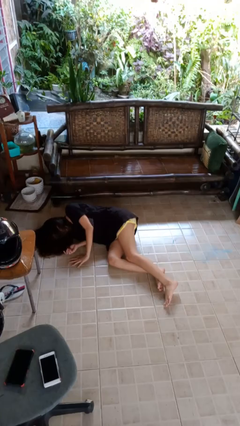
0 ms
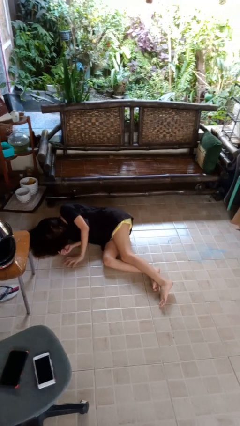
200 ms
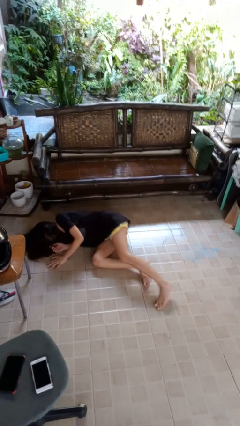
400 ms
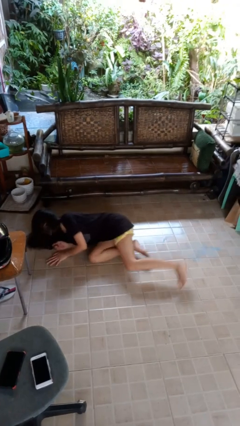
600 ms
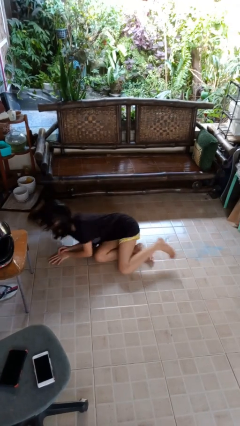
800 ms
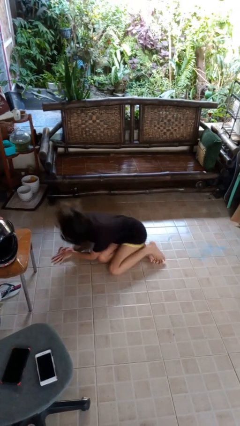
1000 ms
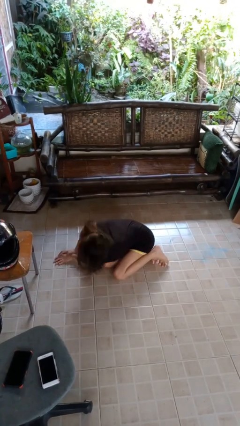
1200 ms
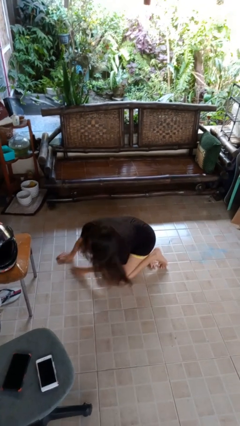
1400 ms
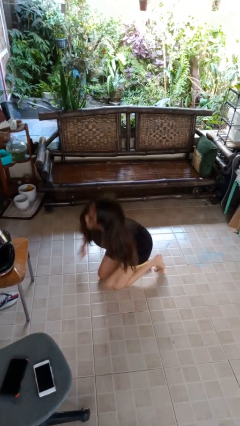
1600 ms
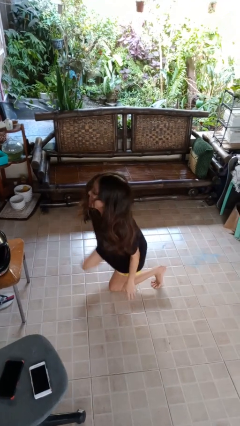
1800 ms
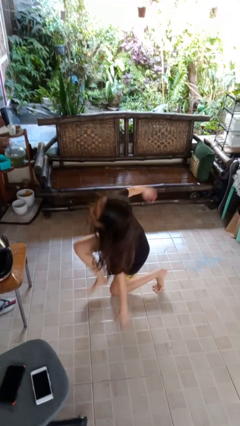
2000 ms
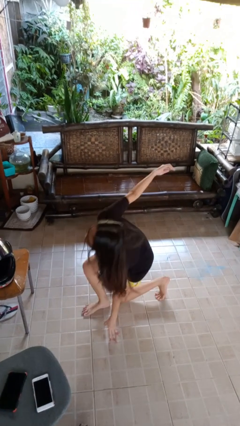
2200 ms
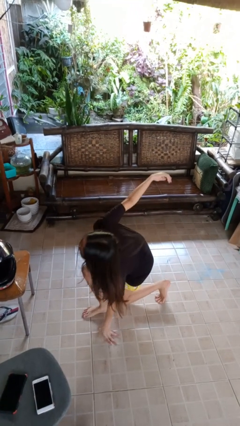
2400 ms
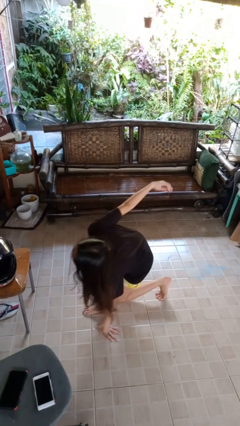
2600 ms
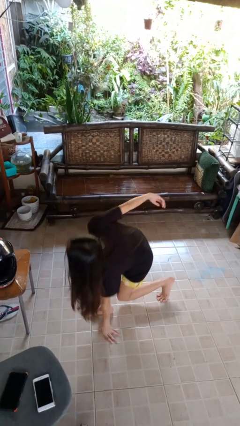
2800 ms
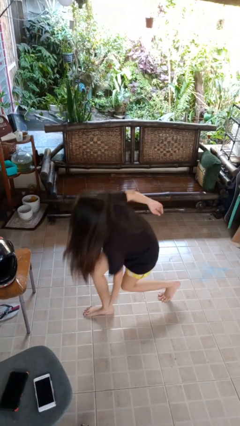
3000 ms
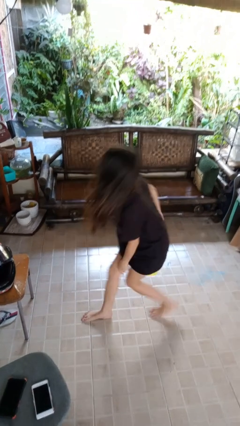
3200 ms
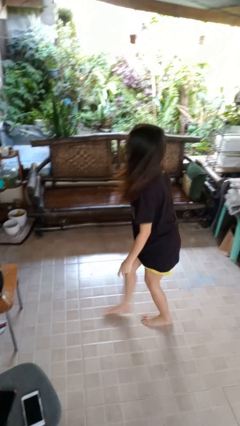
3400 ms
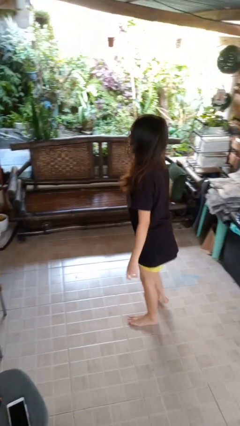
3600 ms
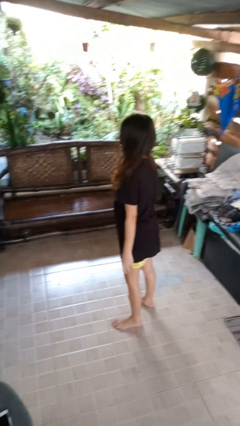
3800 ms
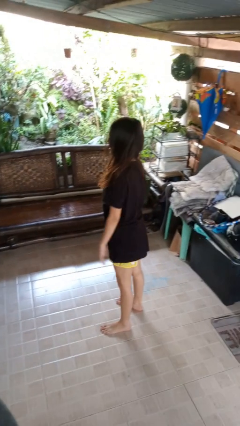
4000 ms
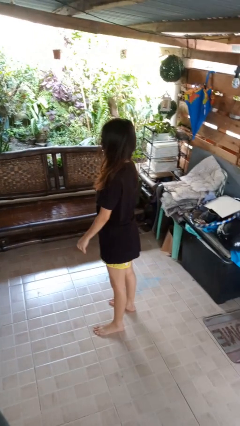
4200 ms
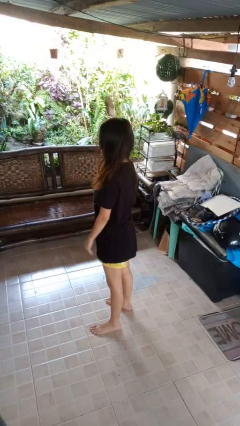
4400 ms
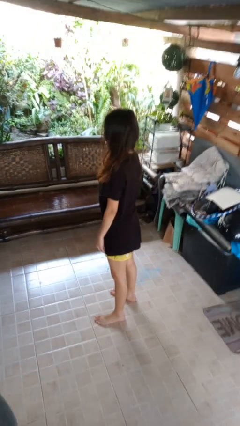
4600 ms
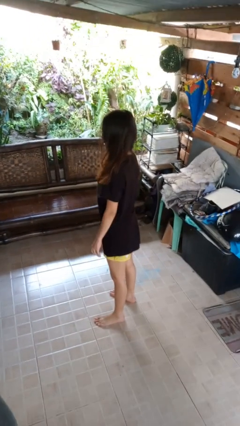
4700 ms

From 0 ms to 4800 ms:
person stands up from floor

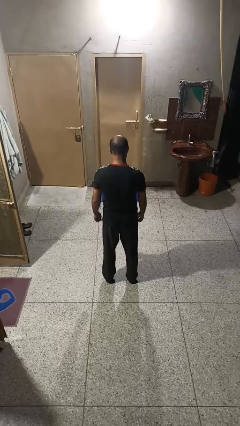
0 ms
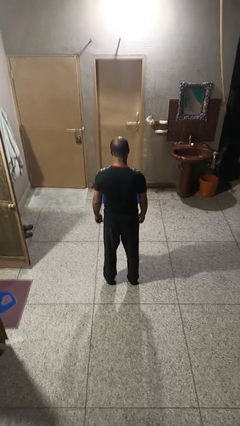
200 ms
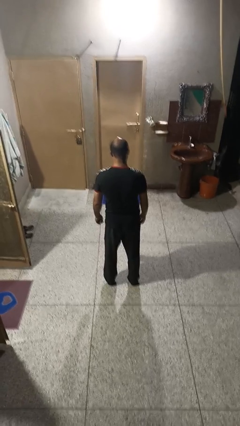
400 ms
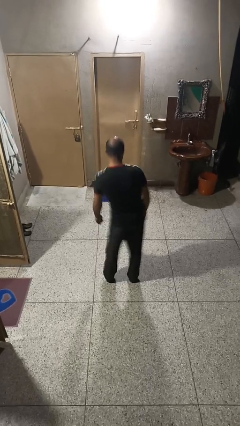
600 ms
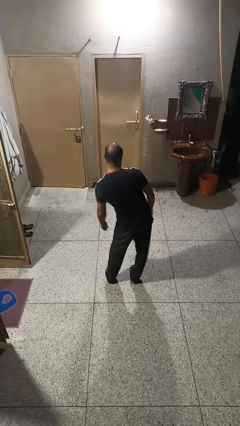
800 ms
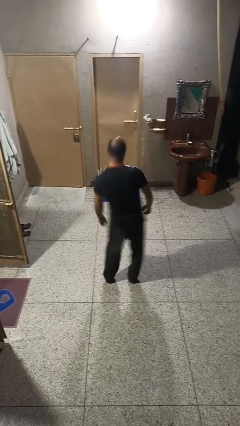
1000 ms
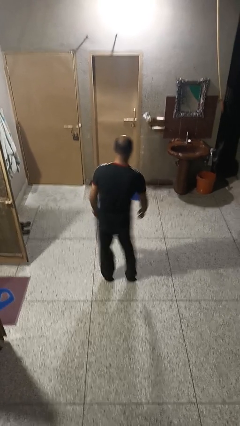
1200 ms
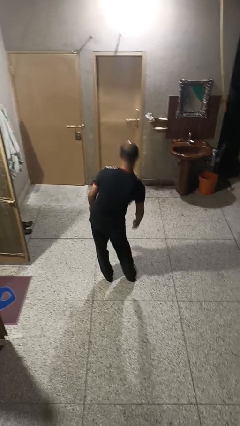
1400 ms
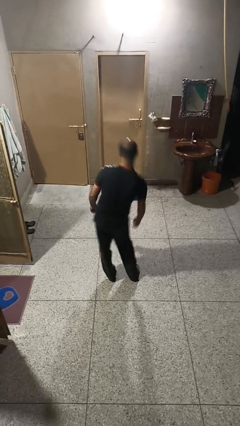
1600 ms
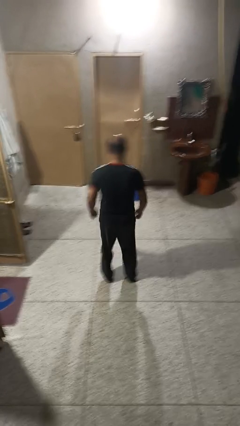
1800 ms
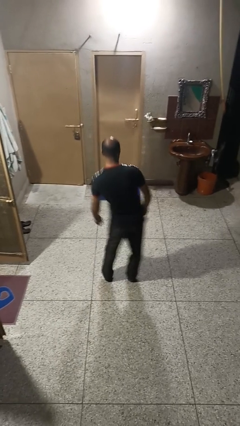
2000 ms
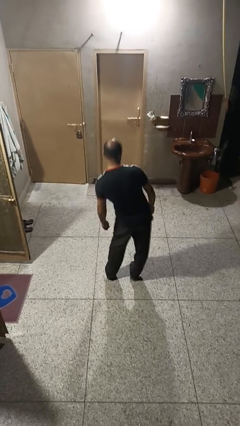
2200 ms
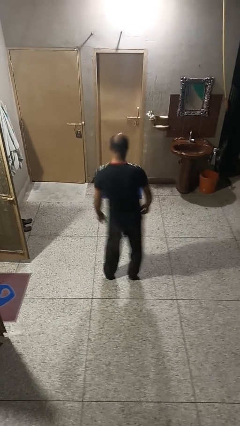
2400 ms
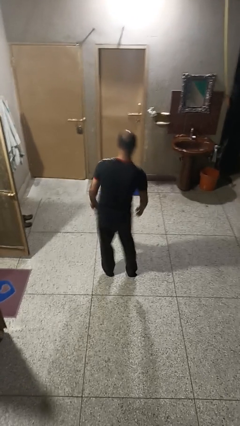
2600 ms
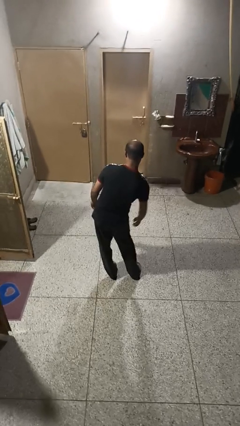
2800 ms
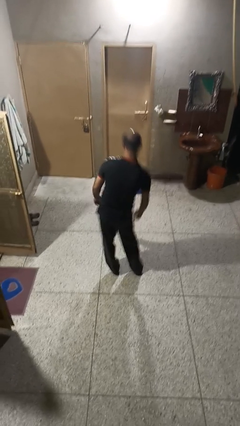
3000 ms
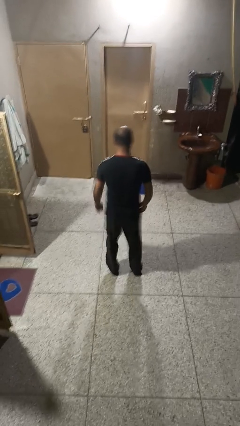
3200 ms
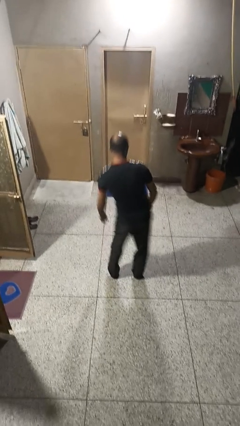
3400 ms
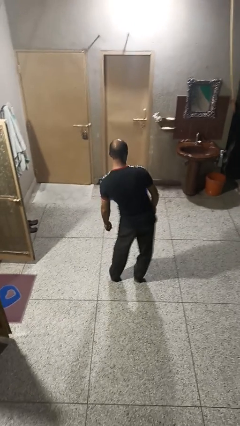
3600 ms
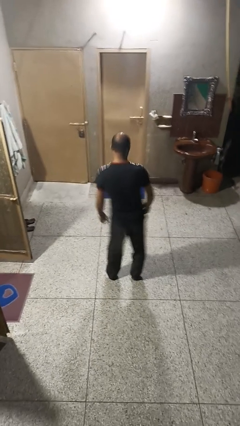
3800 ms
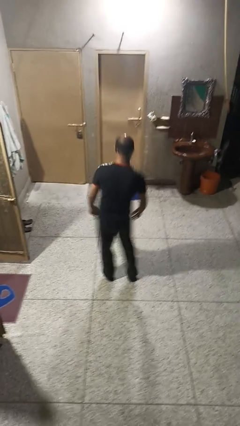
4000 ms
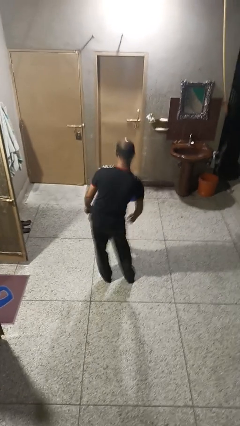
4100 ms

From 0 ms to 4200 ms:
person wiggles hips

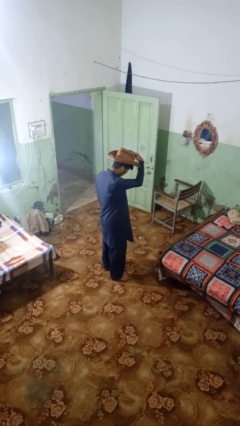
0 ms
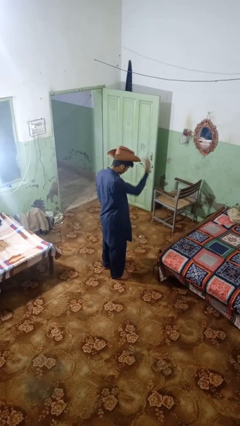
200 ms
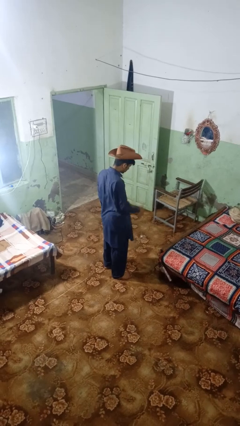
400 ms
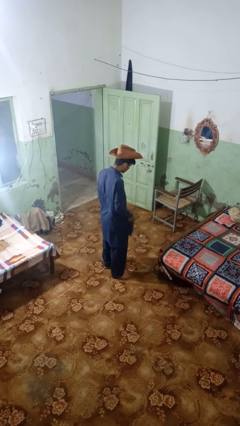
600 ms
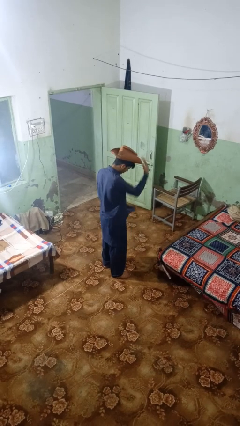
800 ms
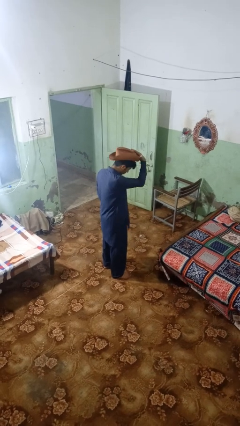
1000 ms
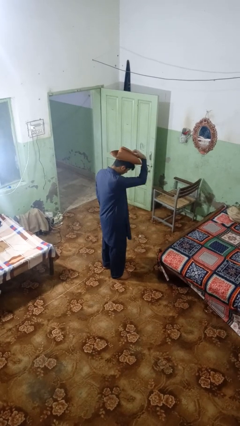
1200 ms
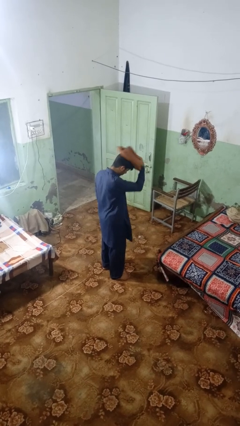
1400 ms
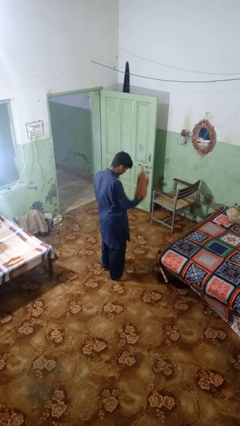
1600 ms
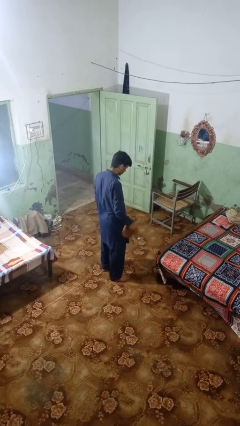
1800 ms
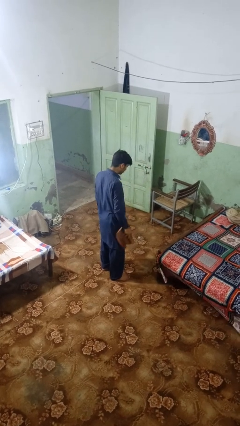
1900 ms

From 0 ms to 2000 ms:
person takes off hat

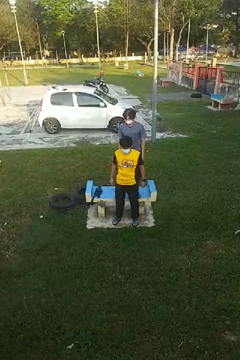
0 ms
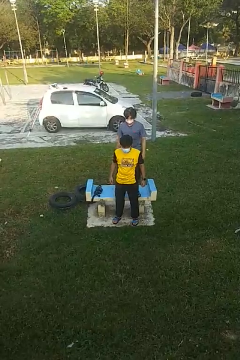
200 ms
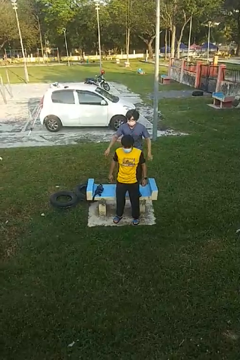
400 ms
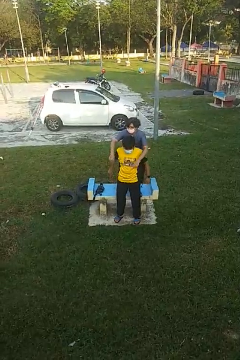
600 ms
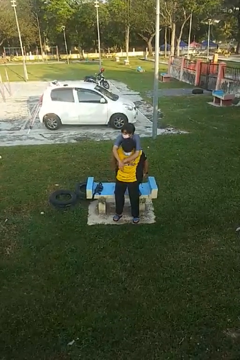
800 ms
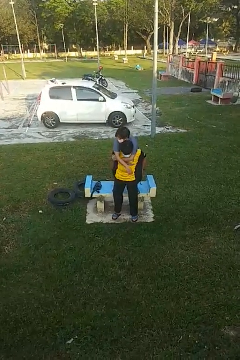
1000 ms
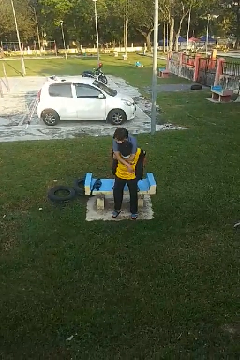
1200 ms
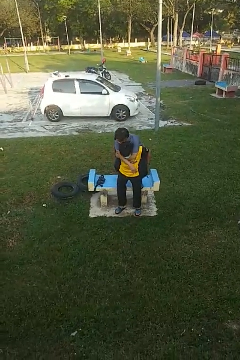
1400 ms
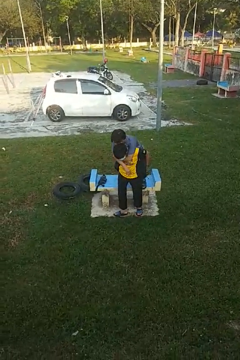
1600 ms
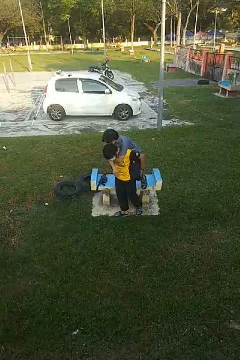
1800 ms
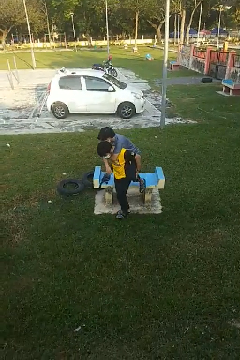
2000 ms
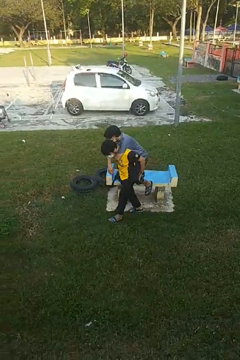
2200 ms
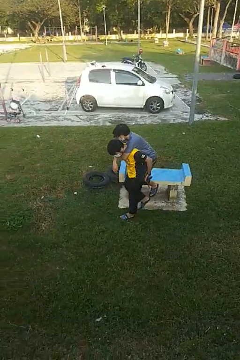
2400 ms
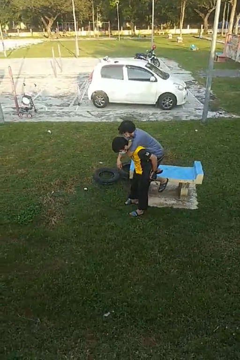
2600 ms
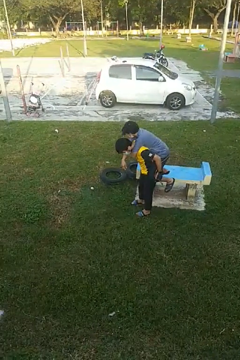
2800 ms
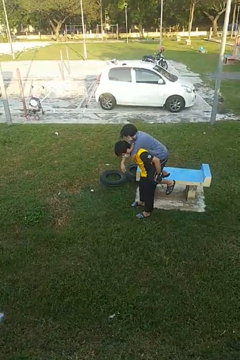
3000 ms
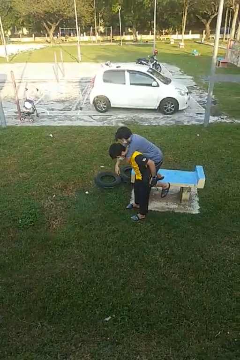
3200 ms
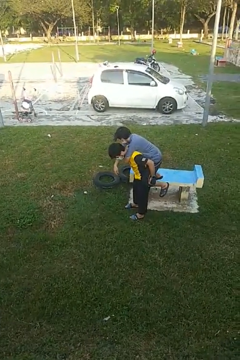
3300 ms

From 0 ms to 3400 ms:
person carries person over shoulder

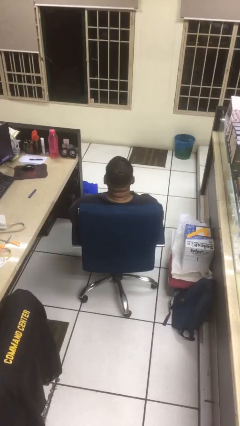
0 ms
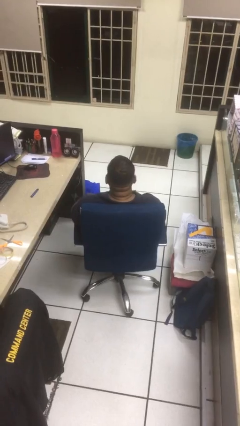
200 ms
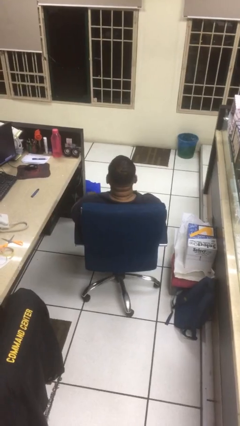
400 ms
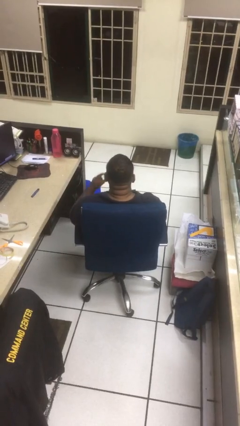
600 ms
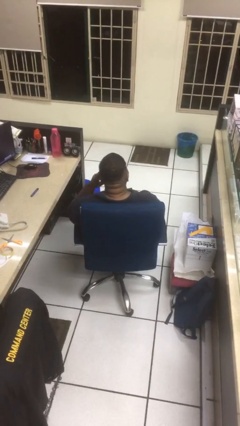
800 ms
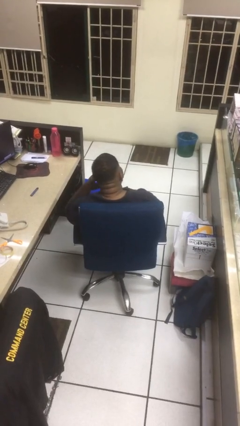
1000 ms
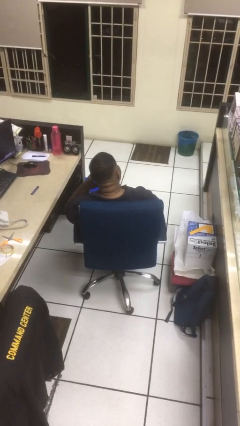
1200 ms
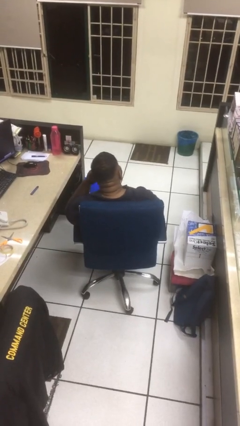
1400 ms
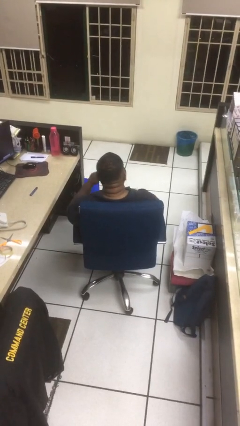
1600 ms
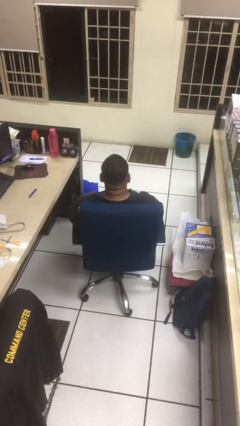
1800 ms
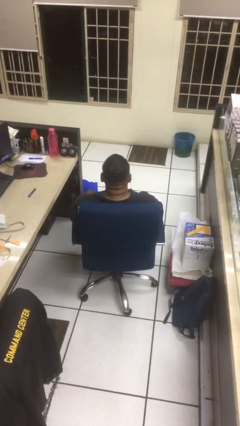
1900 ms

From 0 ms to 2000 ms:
person gestures listen closely

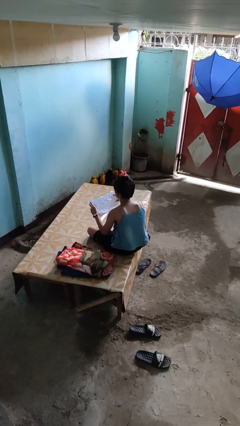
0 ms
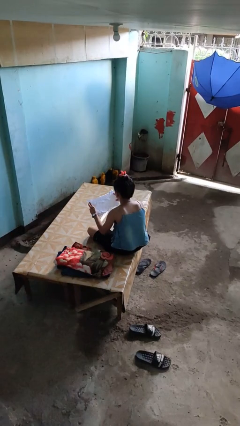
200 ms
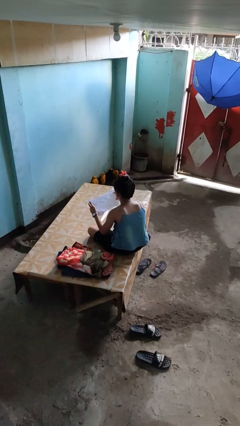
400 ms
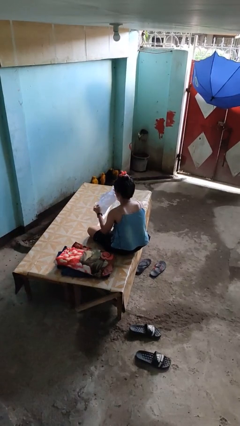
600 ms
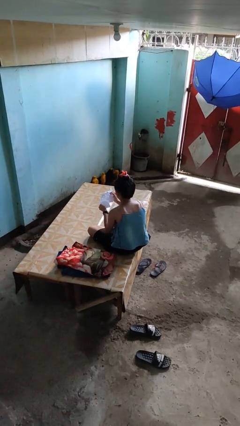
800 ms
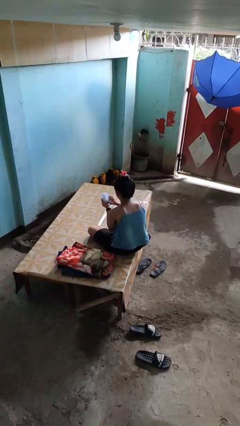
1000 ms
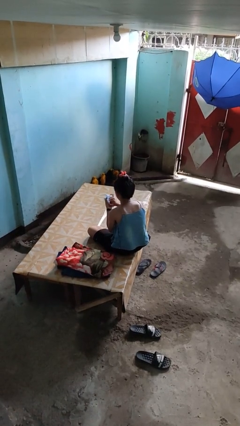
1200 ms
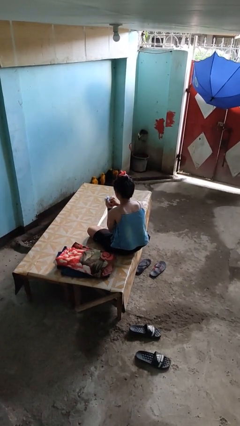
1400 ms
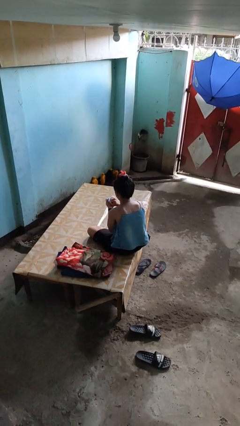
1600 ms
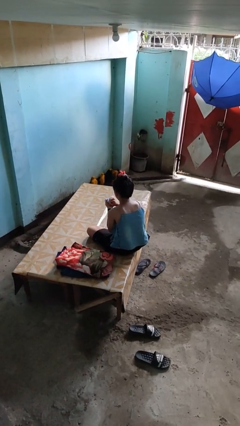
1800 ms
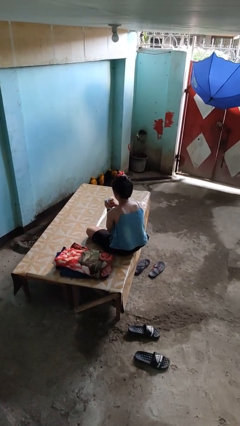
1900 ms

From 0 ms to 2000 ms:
person crumples paper
